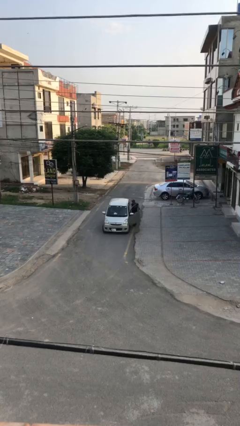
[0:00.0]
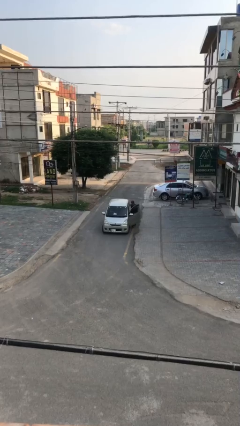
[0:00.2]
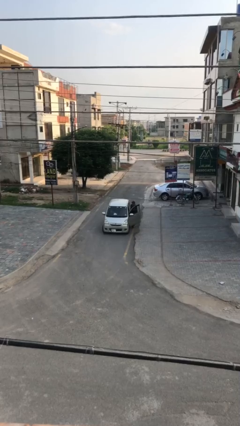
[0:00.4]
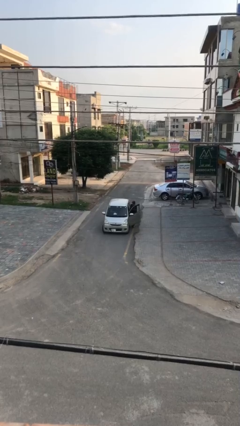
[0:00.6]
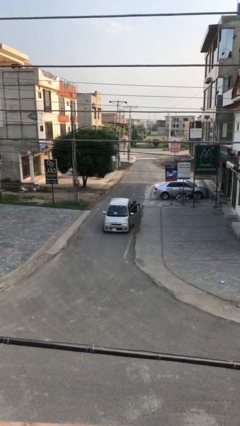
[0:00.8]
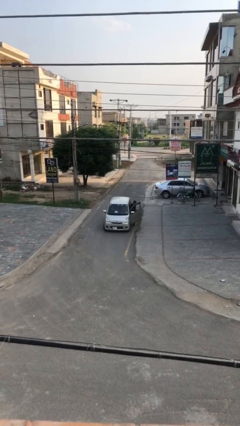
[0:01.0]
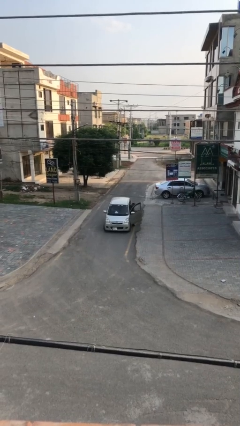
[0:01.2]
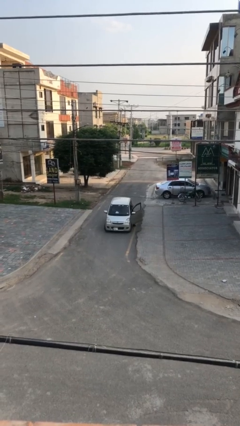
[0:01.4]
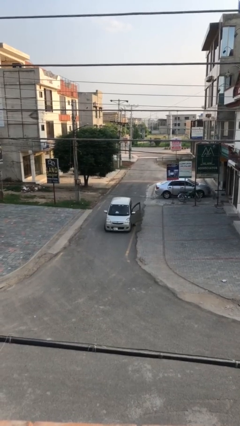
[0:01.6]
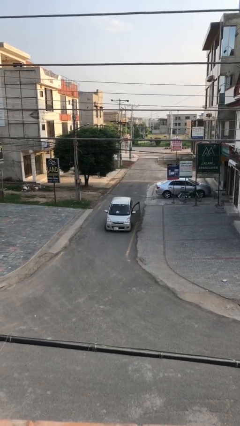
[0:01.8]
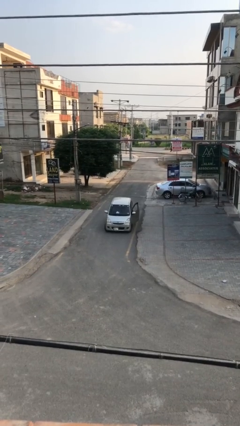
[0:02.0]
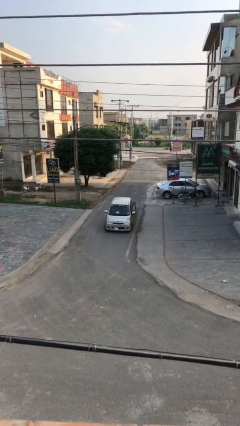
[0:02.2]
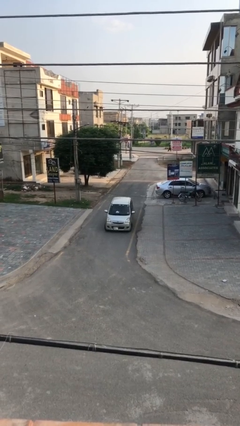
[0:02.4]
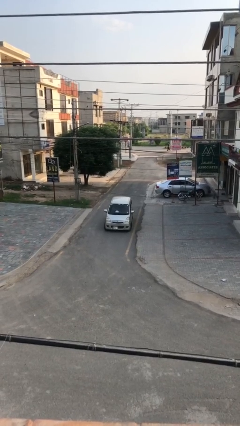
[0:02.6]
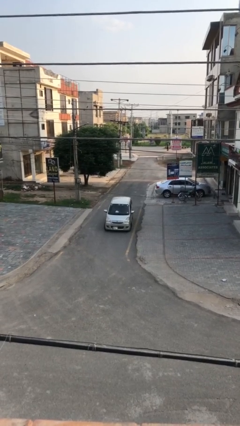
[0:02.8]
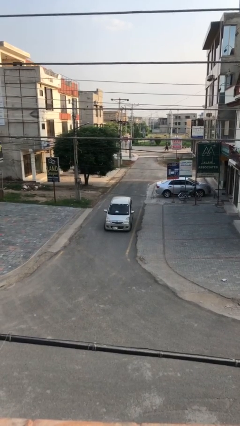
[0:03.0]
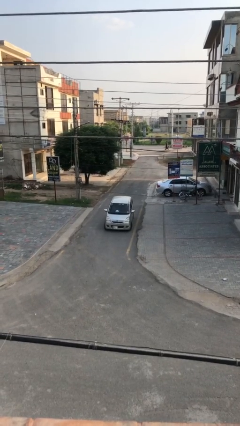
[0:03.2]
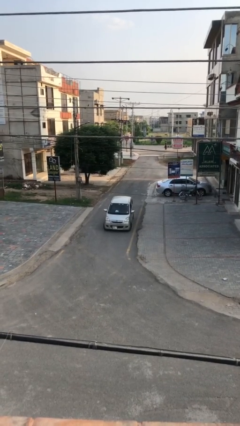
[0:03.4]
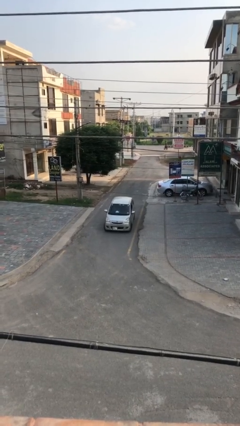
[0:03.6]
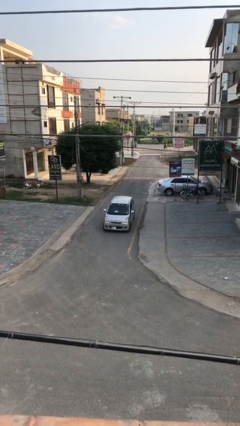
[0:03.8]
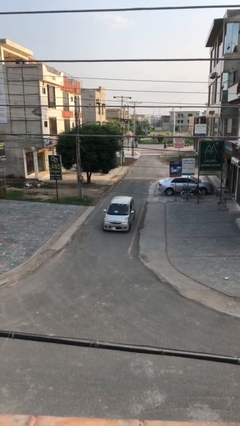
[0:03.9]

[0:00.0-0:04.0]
car picks up person

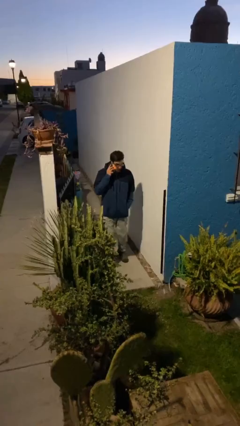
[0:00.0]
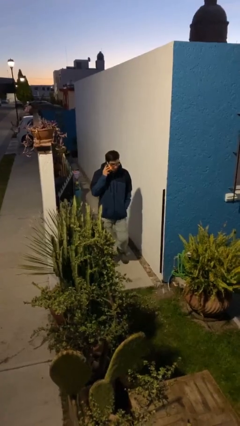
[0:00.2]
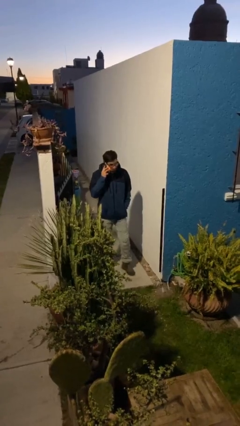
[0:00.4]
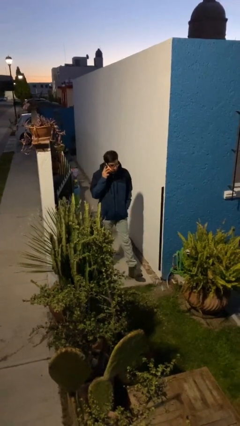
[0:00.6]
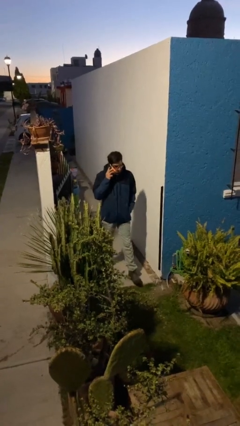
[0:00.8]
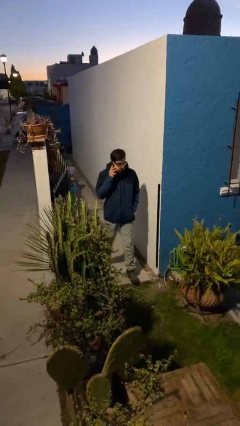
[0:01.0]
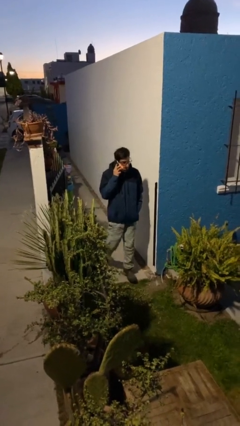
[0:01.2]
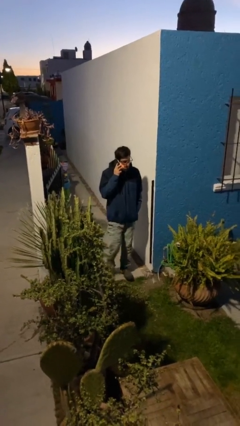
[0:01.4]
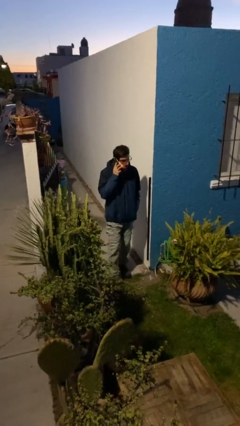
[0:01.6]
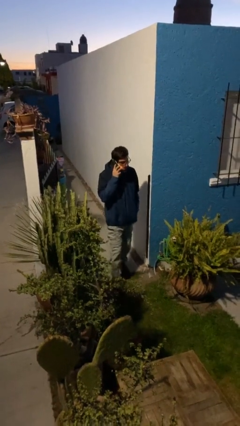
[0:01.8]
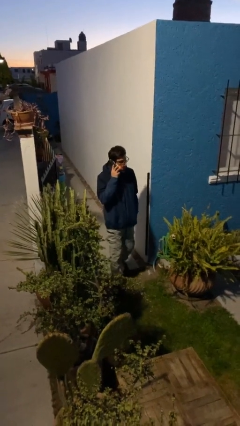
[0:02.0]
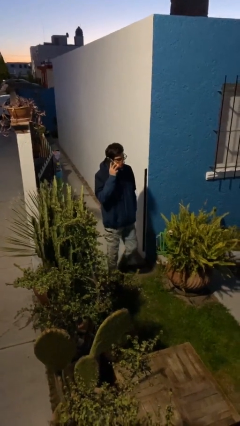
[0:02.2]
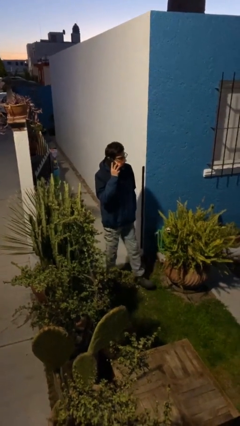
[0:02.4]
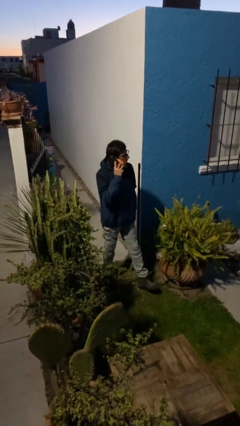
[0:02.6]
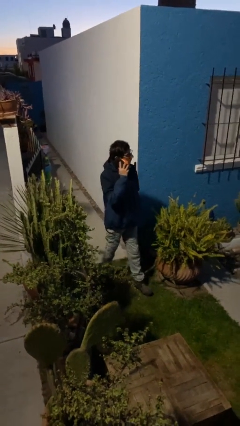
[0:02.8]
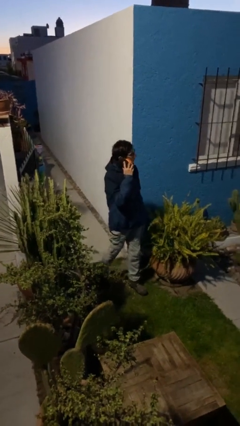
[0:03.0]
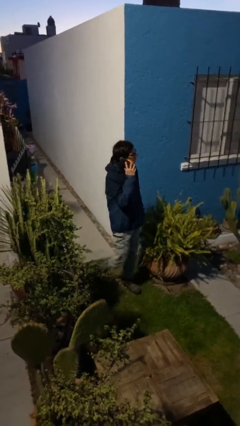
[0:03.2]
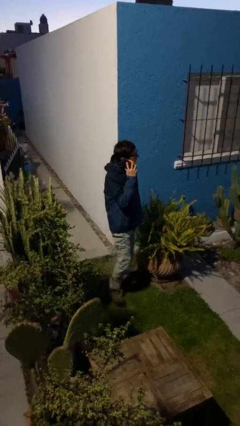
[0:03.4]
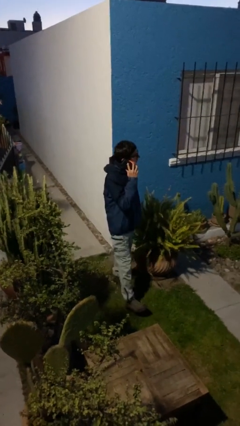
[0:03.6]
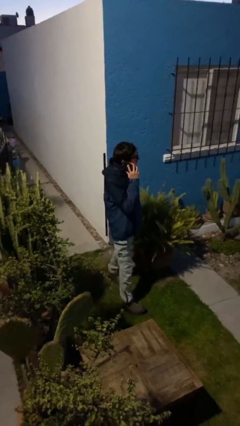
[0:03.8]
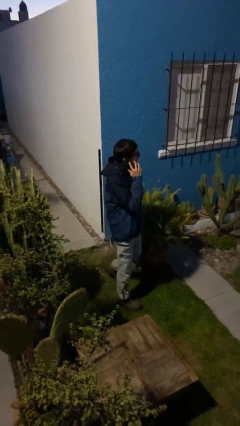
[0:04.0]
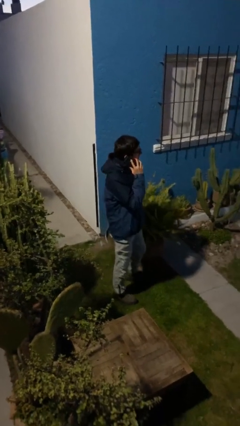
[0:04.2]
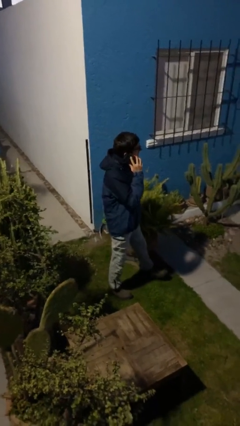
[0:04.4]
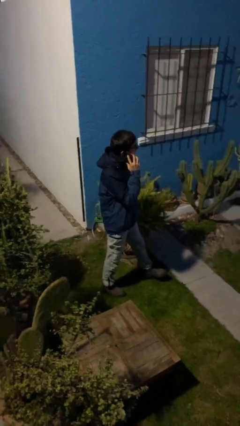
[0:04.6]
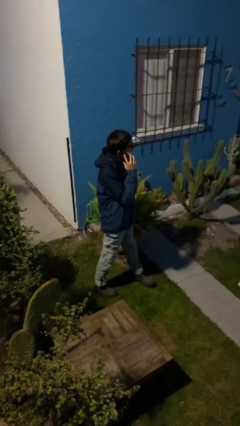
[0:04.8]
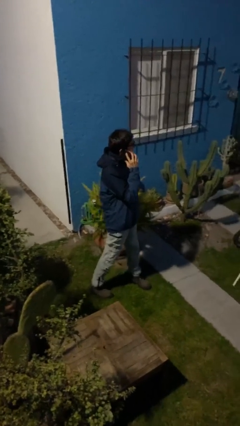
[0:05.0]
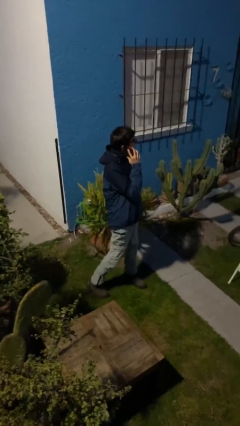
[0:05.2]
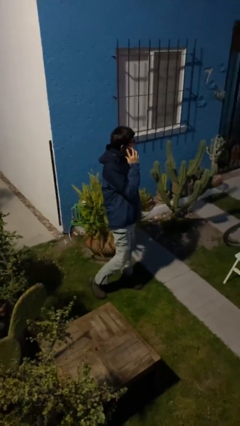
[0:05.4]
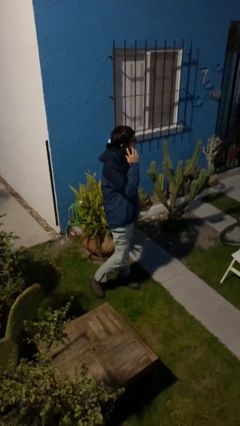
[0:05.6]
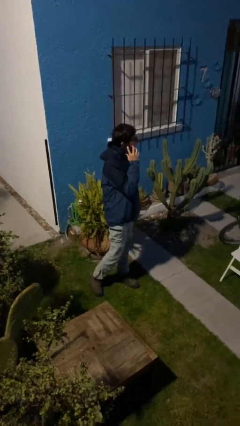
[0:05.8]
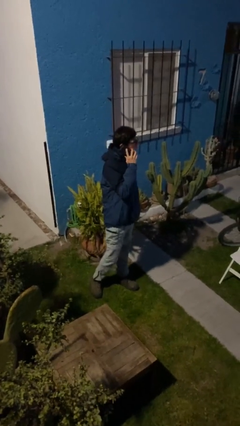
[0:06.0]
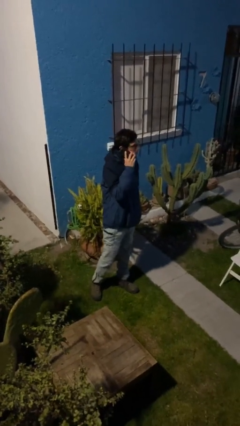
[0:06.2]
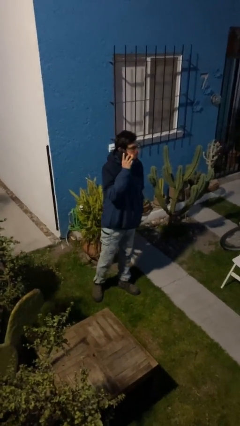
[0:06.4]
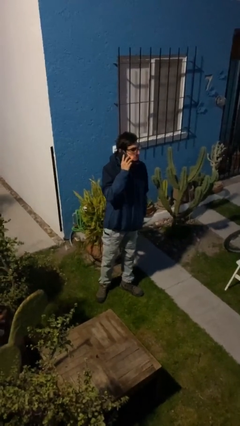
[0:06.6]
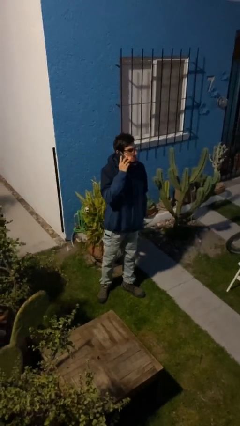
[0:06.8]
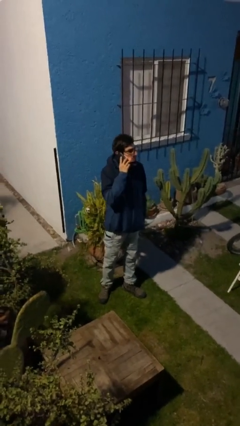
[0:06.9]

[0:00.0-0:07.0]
person enters scene through structure

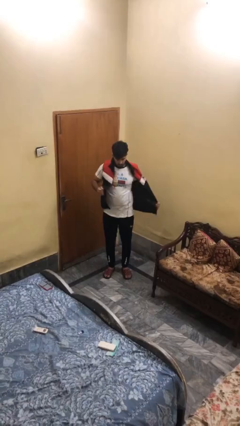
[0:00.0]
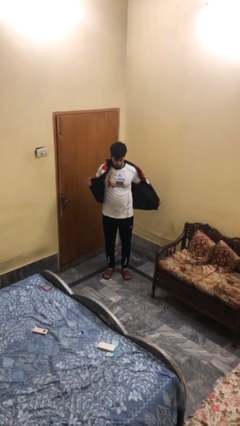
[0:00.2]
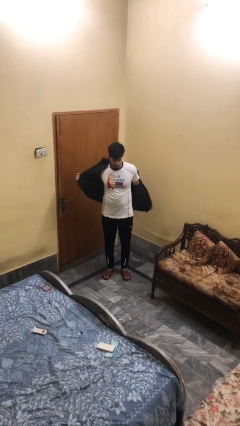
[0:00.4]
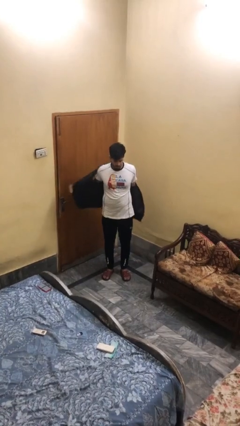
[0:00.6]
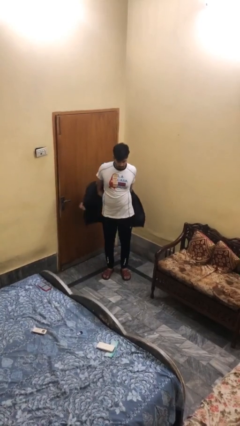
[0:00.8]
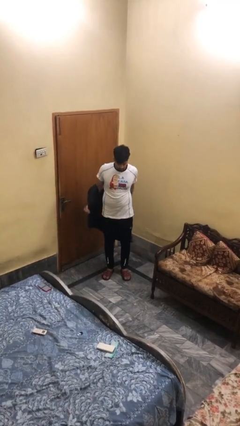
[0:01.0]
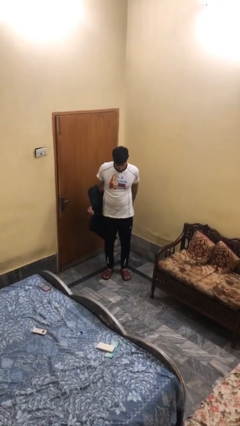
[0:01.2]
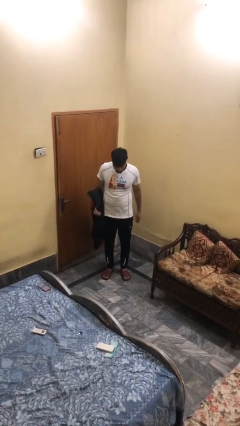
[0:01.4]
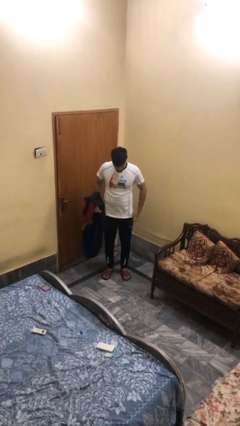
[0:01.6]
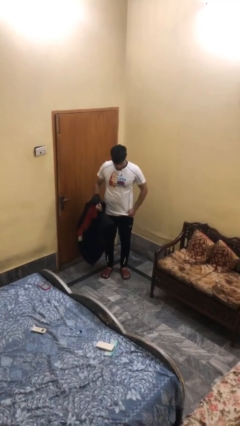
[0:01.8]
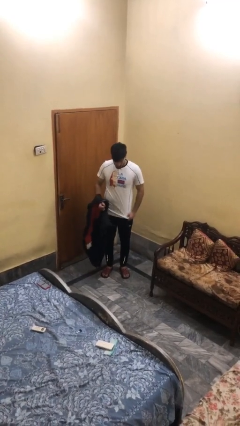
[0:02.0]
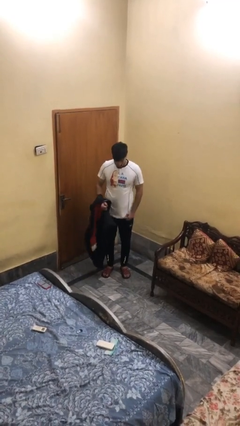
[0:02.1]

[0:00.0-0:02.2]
person takes off jacket

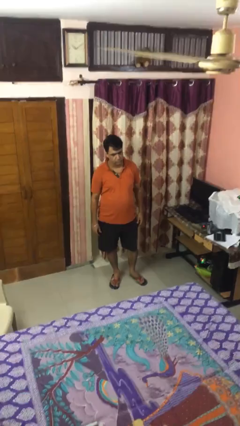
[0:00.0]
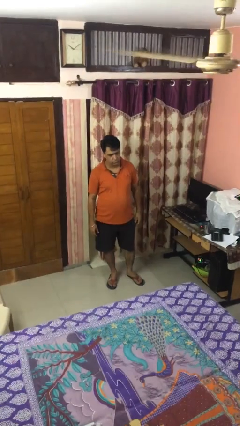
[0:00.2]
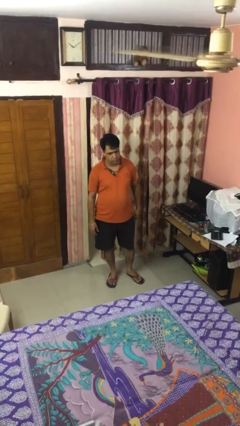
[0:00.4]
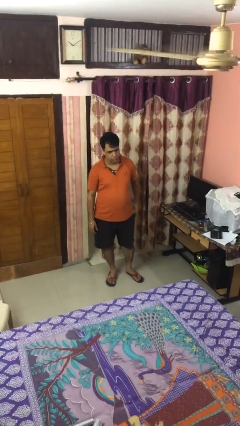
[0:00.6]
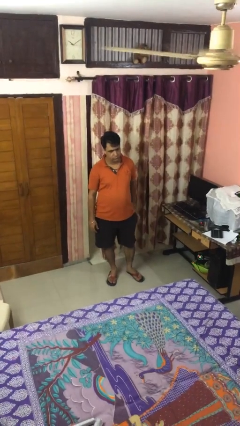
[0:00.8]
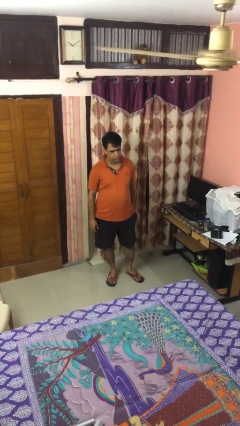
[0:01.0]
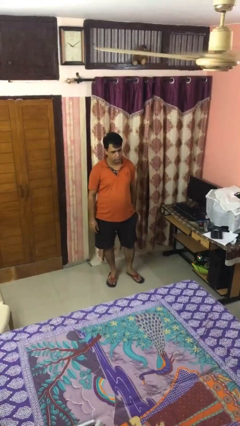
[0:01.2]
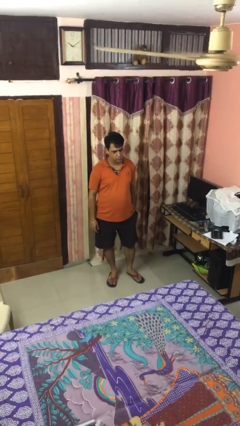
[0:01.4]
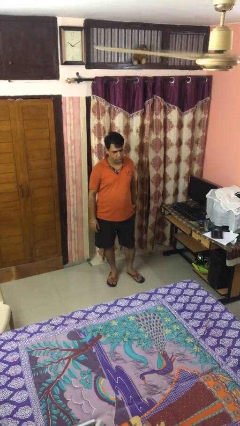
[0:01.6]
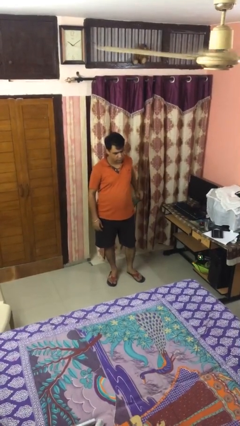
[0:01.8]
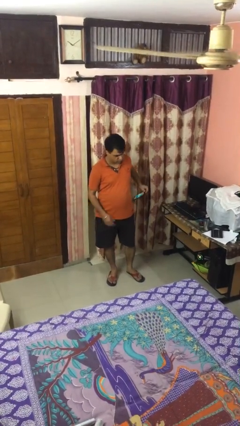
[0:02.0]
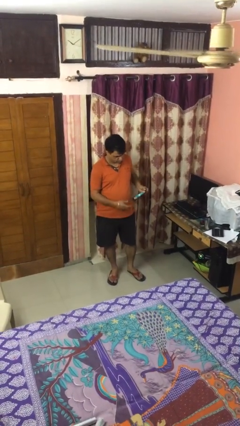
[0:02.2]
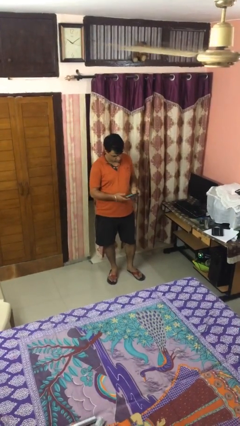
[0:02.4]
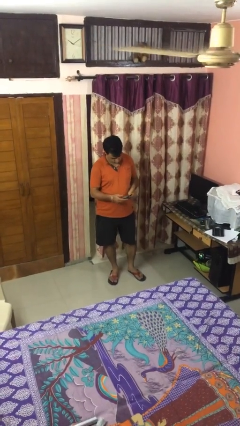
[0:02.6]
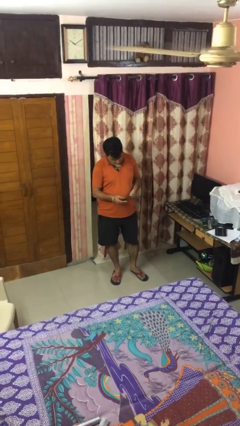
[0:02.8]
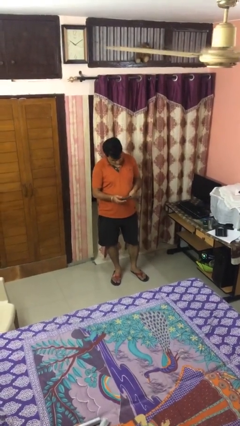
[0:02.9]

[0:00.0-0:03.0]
person takes phone from pocket

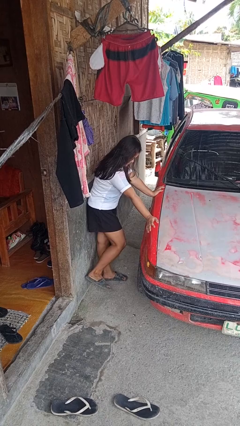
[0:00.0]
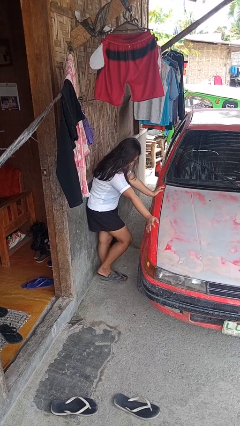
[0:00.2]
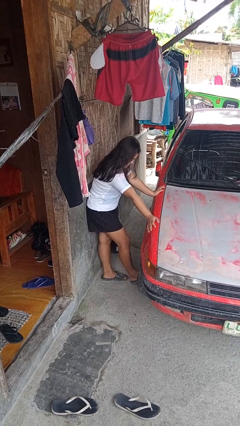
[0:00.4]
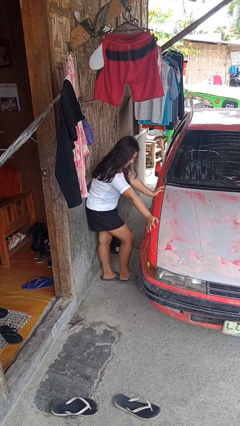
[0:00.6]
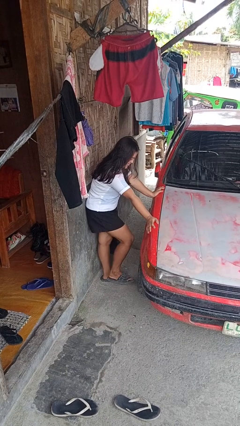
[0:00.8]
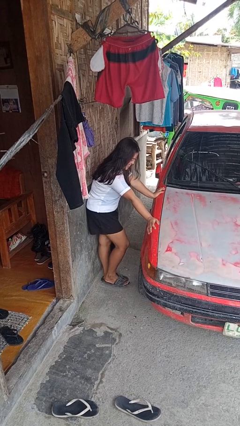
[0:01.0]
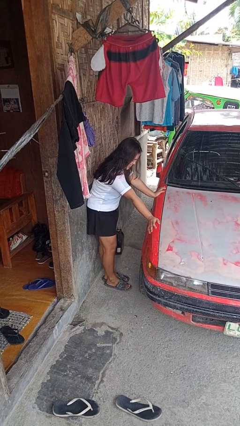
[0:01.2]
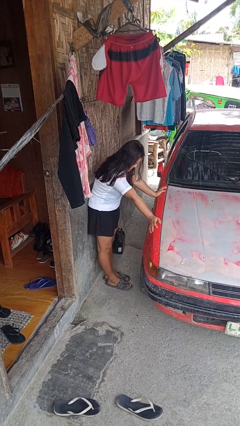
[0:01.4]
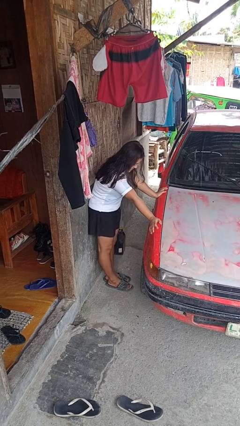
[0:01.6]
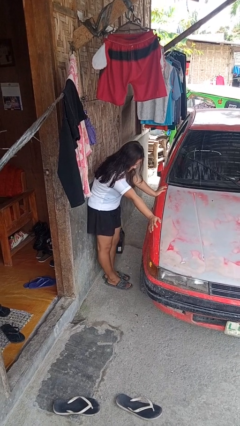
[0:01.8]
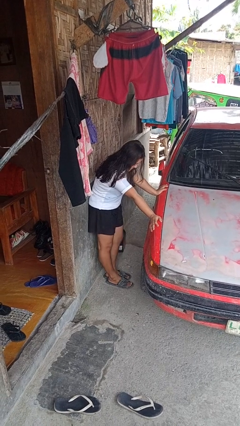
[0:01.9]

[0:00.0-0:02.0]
person kicks car tires
